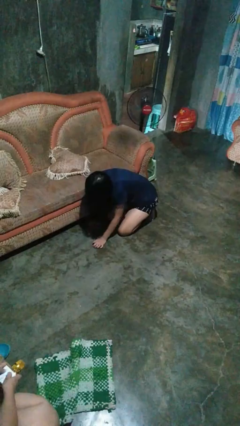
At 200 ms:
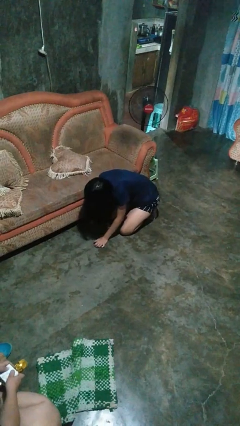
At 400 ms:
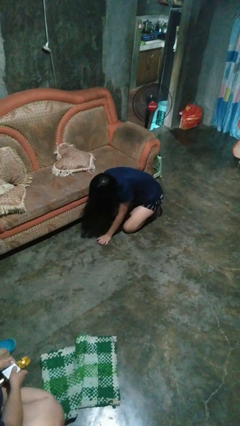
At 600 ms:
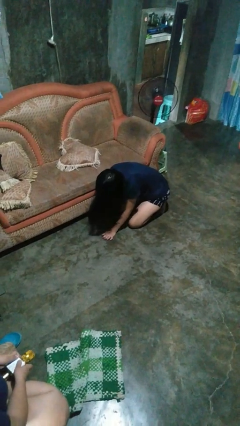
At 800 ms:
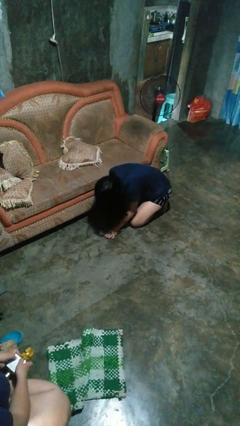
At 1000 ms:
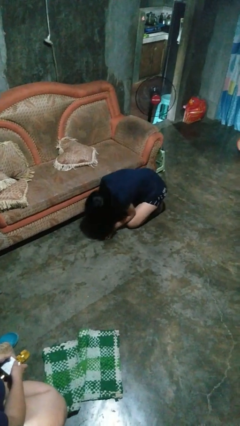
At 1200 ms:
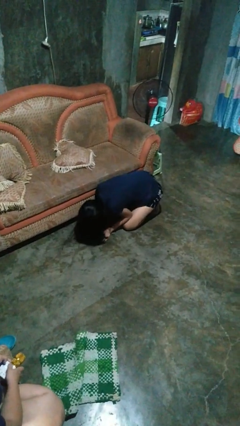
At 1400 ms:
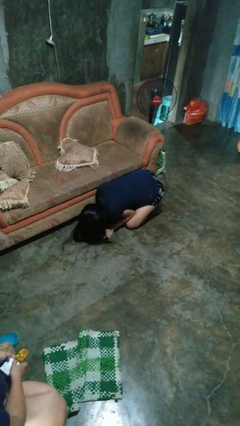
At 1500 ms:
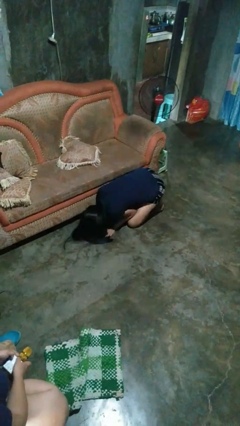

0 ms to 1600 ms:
person searches in couch

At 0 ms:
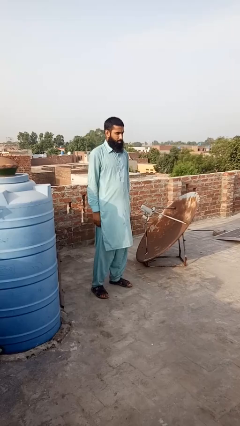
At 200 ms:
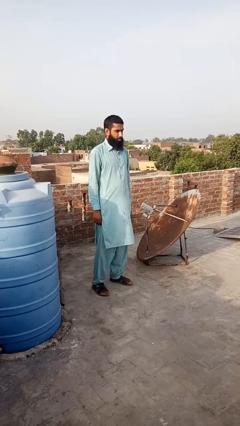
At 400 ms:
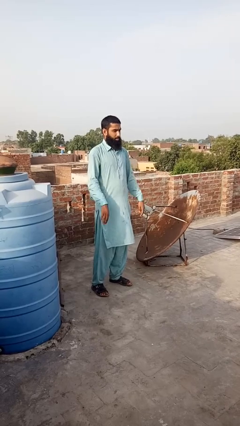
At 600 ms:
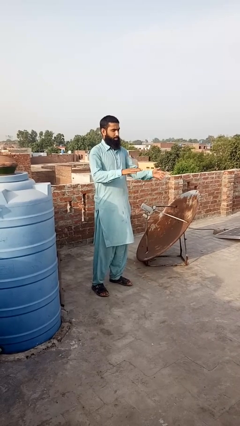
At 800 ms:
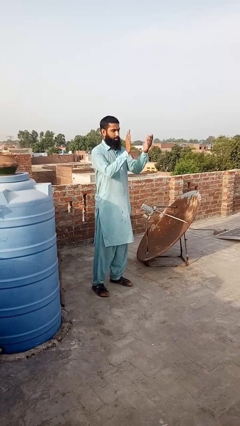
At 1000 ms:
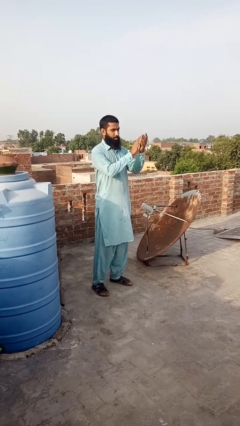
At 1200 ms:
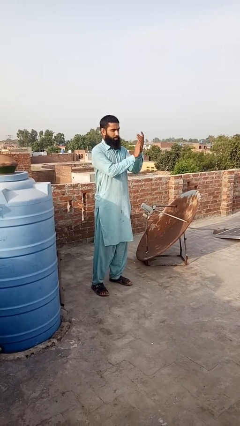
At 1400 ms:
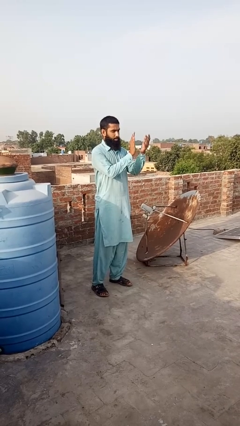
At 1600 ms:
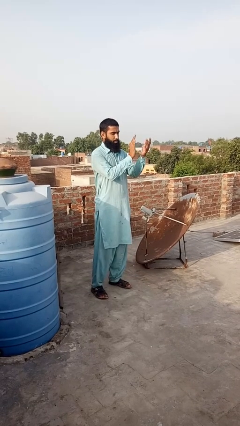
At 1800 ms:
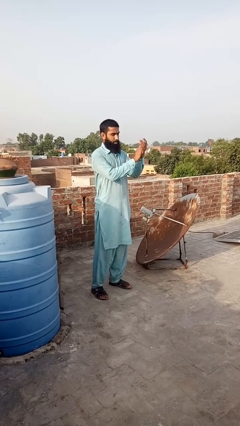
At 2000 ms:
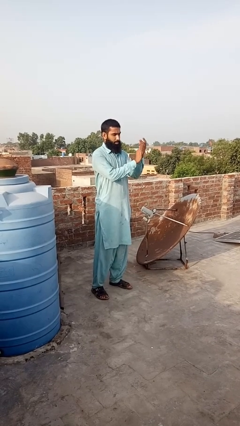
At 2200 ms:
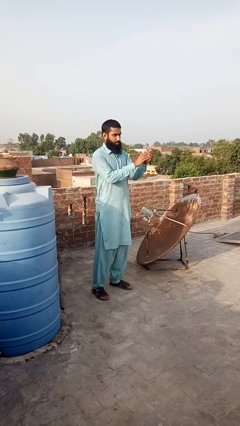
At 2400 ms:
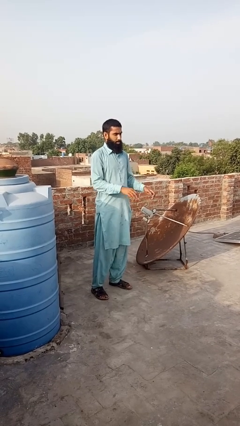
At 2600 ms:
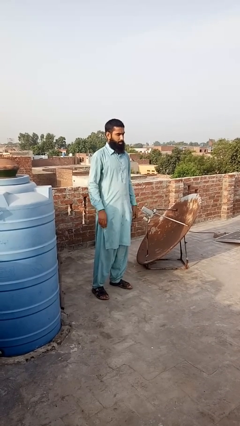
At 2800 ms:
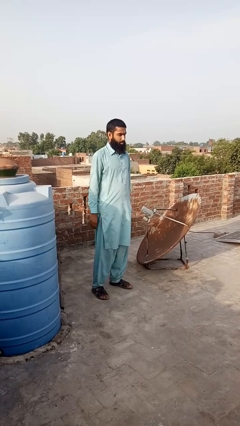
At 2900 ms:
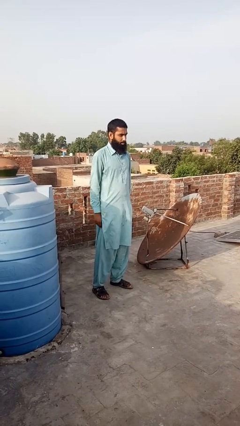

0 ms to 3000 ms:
person claps hands

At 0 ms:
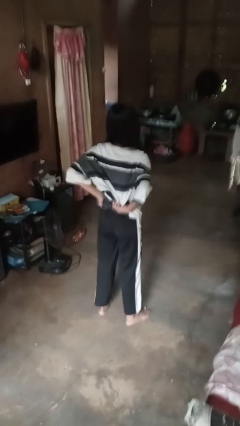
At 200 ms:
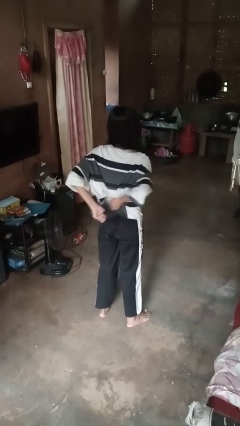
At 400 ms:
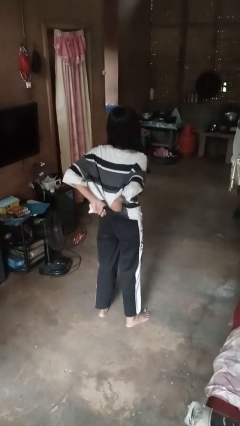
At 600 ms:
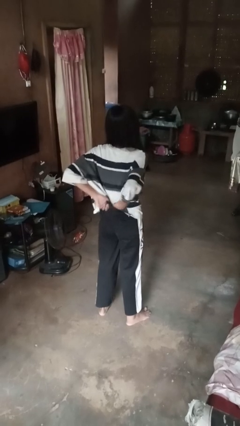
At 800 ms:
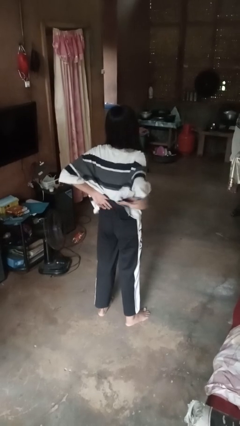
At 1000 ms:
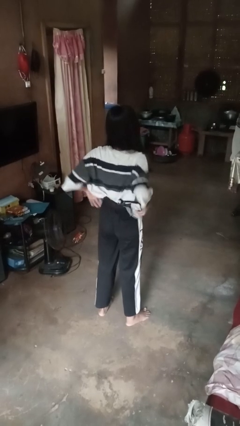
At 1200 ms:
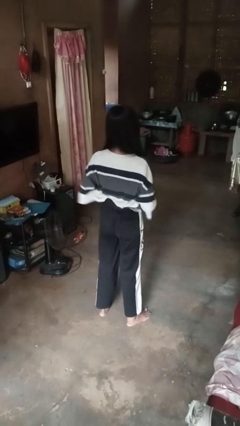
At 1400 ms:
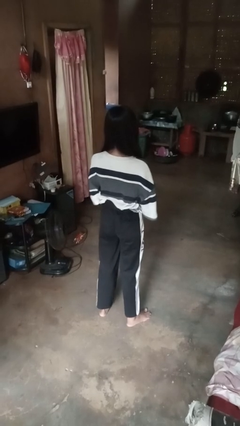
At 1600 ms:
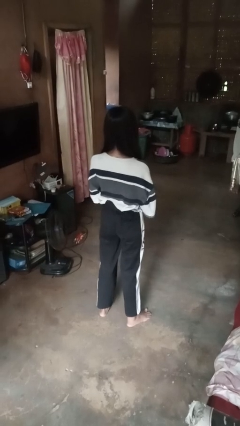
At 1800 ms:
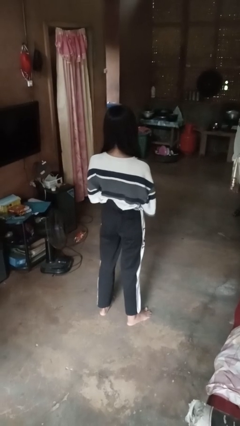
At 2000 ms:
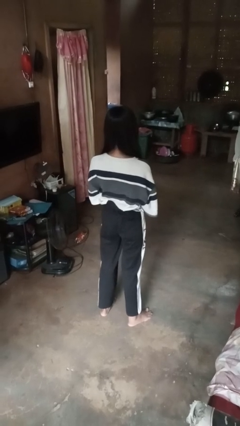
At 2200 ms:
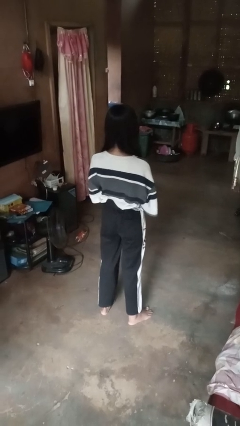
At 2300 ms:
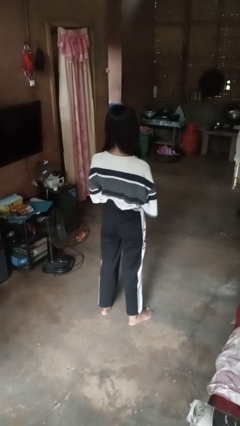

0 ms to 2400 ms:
person tucks in shirt

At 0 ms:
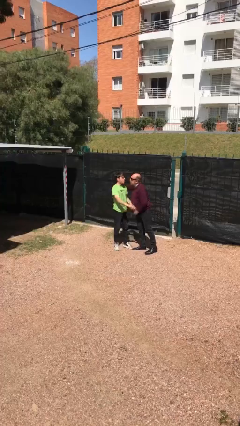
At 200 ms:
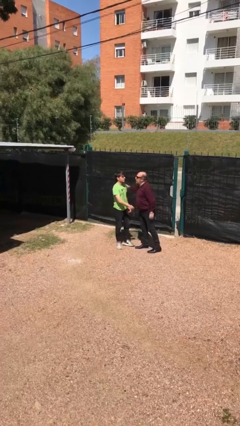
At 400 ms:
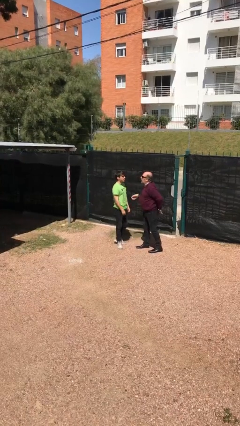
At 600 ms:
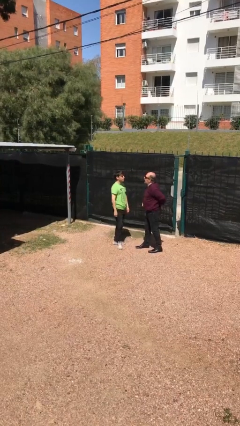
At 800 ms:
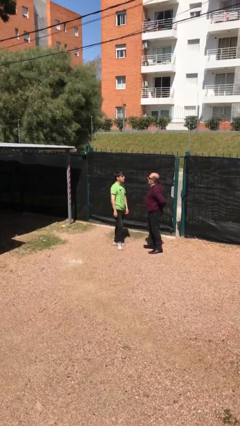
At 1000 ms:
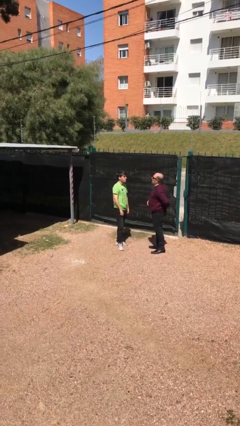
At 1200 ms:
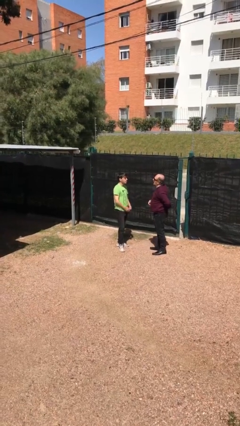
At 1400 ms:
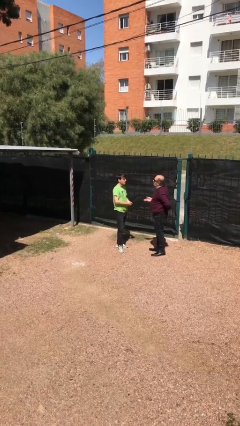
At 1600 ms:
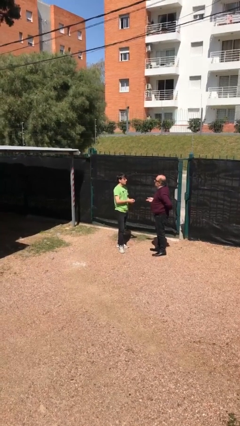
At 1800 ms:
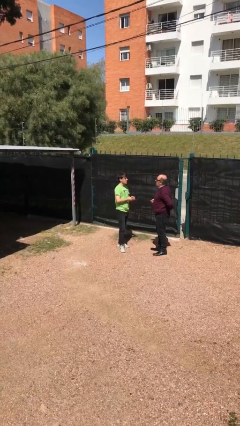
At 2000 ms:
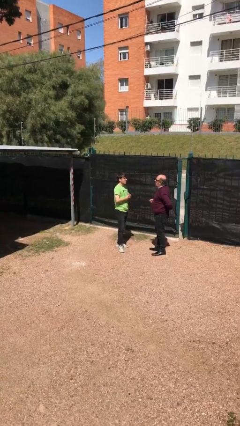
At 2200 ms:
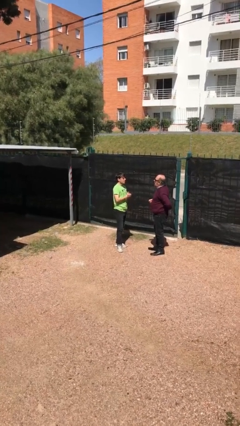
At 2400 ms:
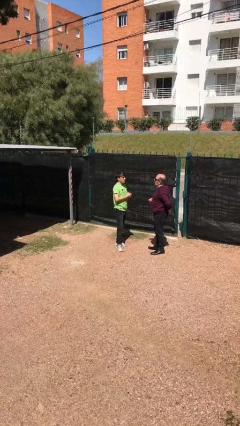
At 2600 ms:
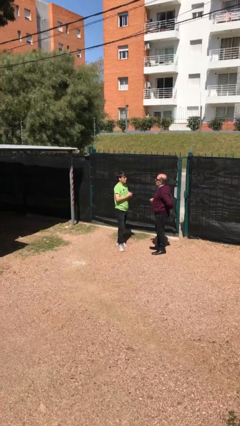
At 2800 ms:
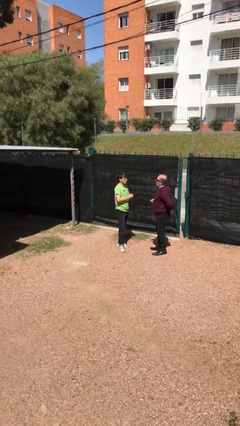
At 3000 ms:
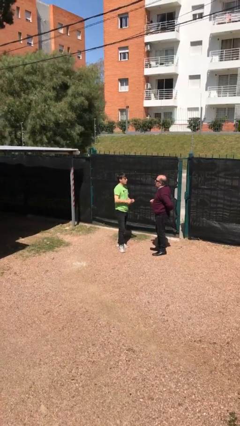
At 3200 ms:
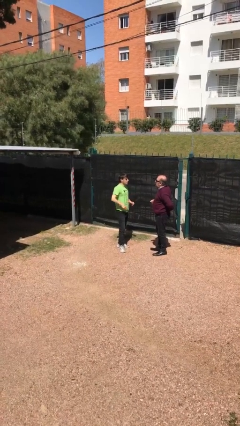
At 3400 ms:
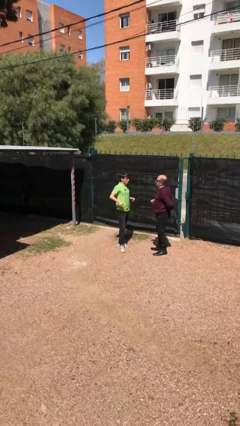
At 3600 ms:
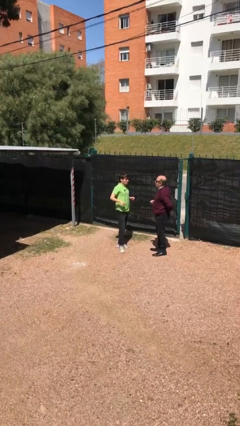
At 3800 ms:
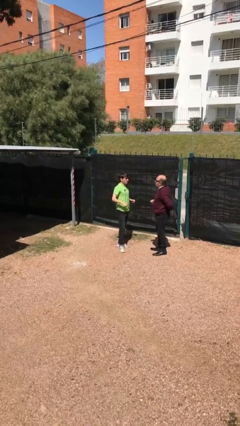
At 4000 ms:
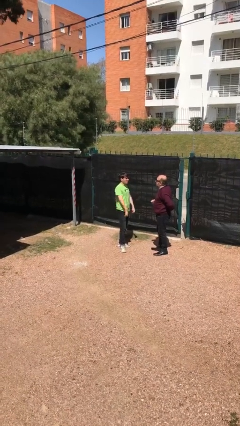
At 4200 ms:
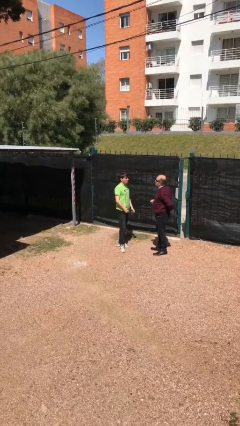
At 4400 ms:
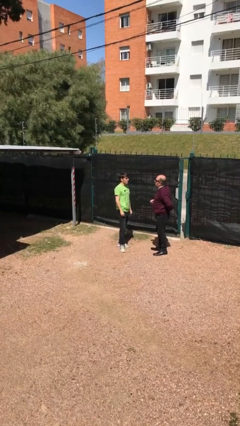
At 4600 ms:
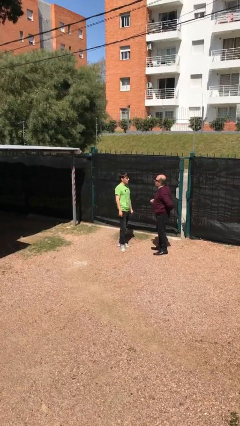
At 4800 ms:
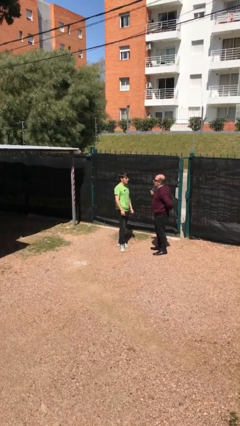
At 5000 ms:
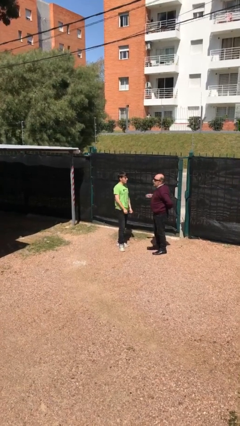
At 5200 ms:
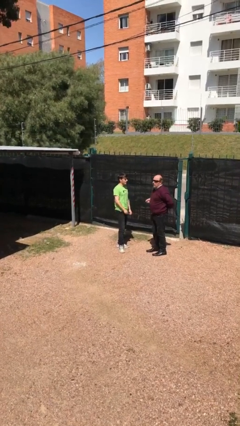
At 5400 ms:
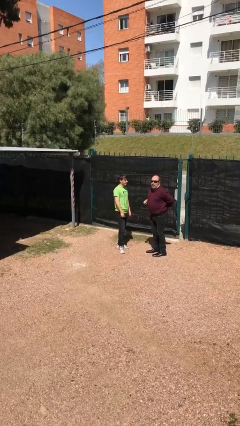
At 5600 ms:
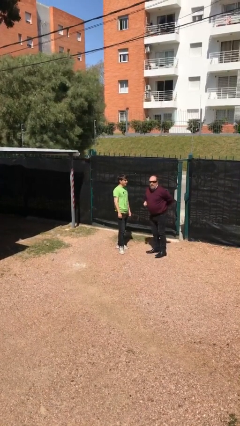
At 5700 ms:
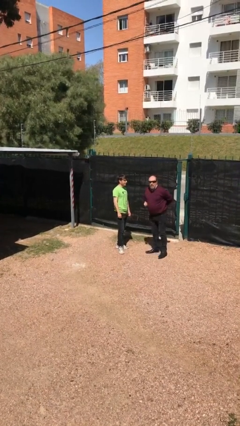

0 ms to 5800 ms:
person talks to person

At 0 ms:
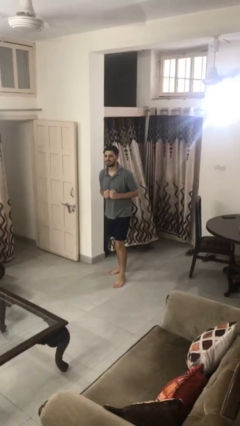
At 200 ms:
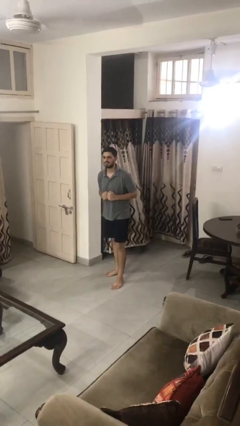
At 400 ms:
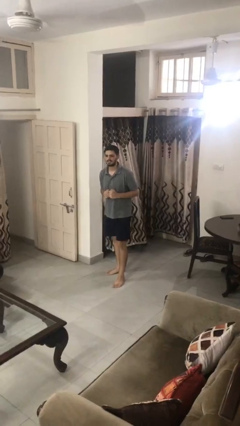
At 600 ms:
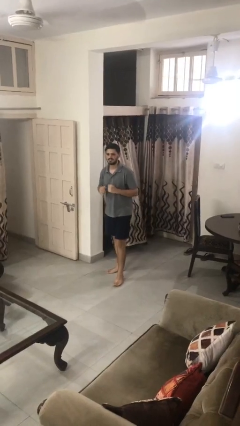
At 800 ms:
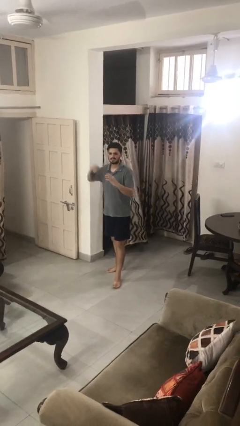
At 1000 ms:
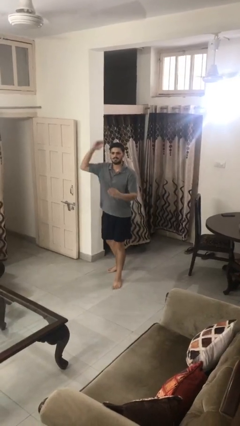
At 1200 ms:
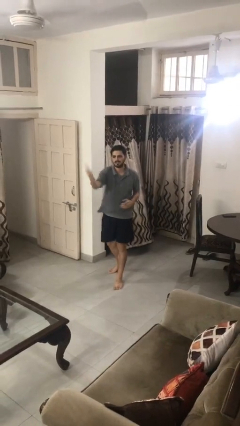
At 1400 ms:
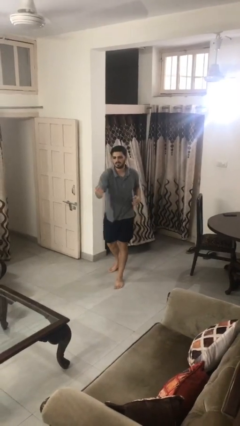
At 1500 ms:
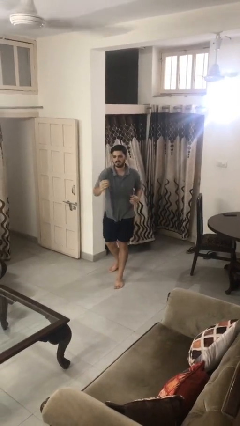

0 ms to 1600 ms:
person karate chop

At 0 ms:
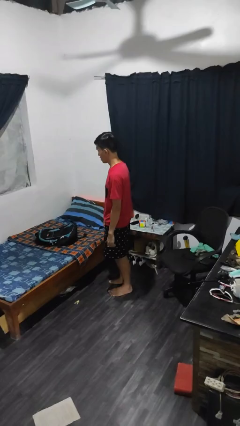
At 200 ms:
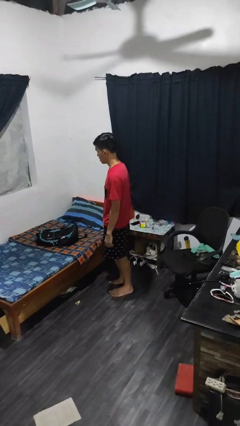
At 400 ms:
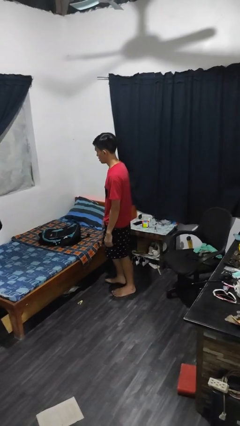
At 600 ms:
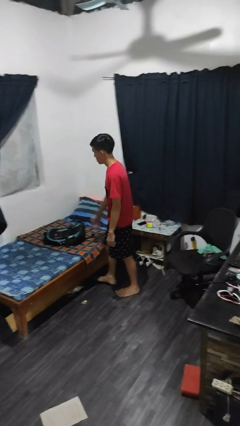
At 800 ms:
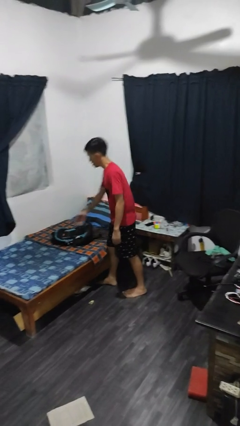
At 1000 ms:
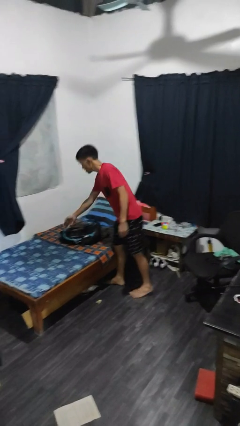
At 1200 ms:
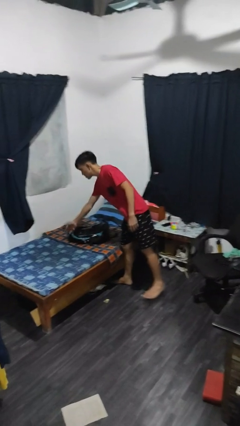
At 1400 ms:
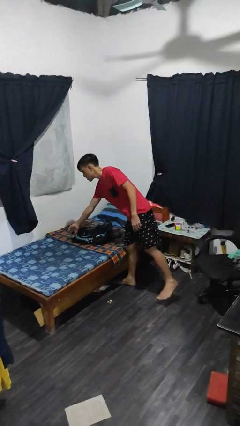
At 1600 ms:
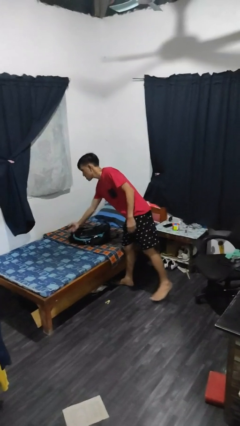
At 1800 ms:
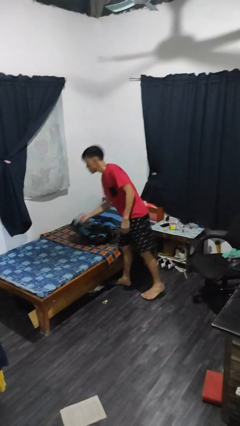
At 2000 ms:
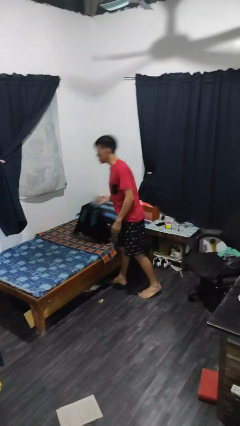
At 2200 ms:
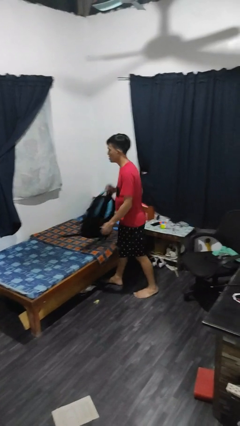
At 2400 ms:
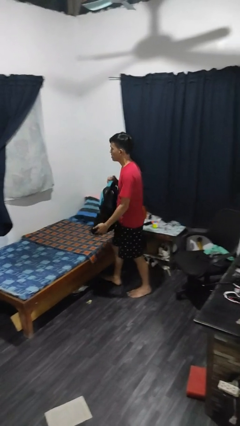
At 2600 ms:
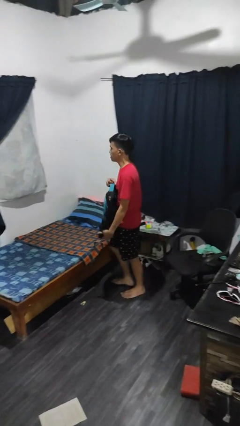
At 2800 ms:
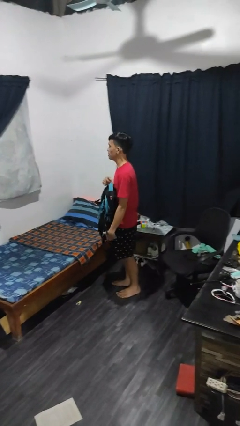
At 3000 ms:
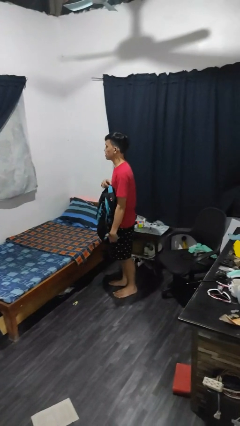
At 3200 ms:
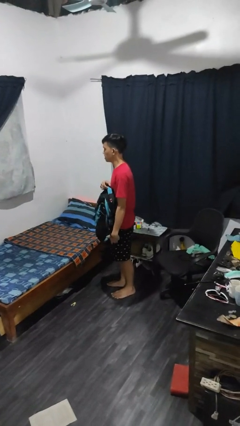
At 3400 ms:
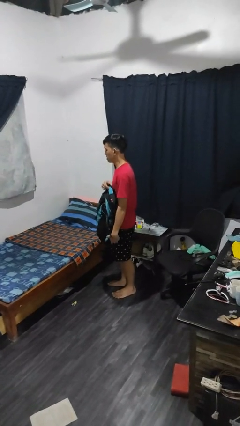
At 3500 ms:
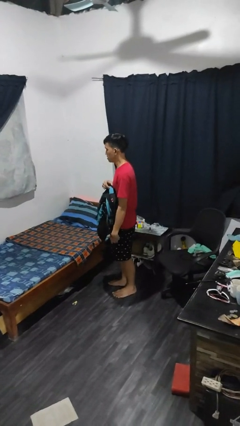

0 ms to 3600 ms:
person picks up object from bed
